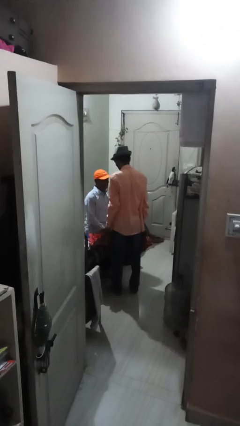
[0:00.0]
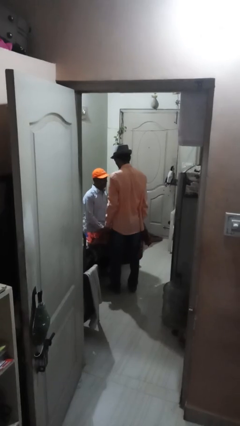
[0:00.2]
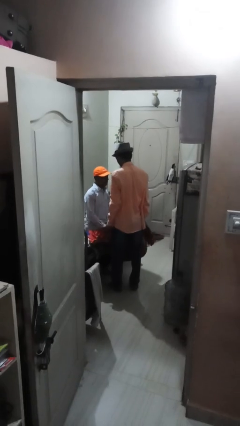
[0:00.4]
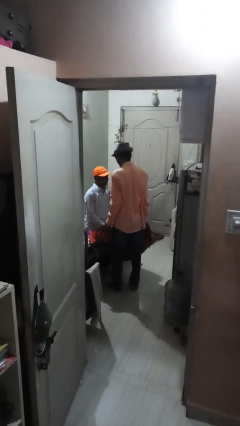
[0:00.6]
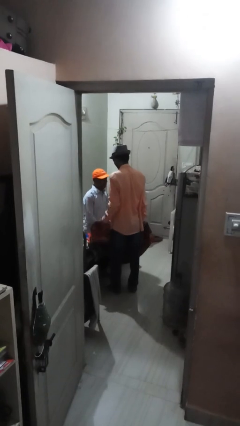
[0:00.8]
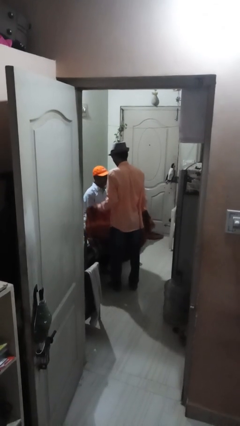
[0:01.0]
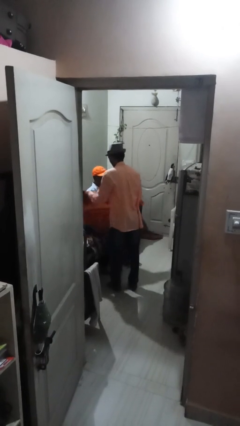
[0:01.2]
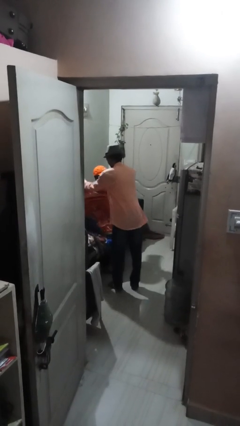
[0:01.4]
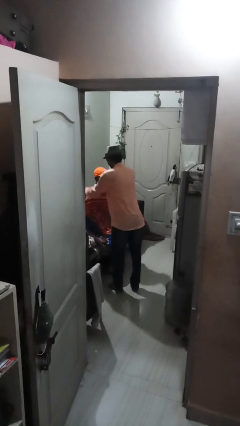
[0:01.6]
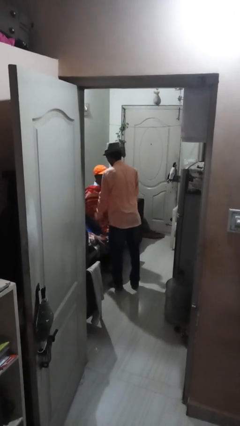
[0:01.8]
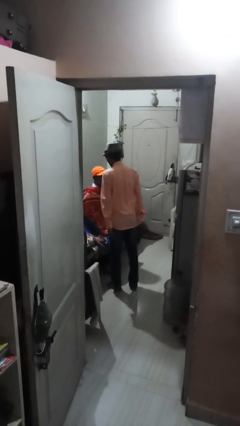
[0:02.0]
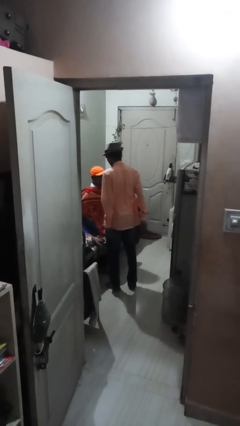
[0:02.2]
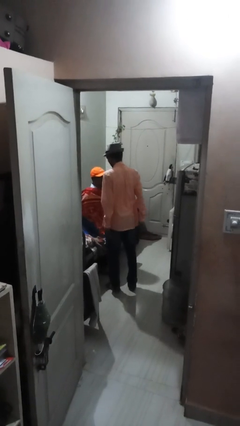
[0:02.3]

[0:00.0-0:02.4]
person uncovers friend with blanket

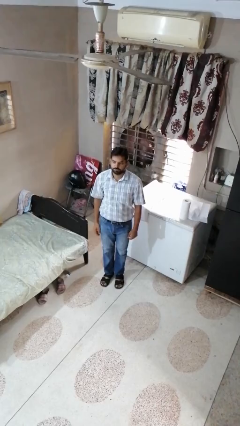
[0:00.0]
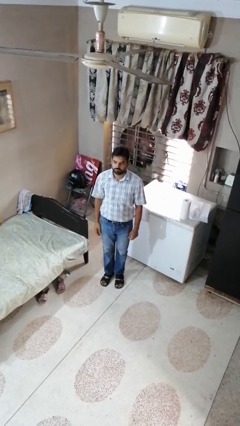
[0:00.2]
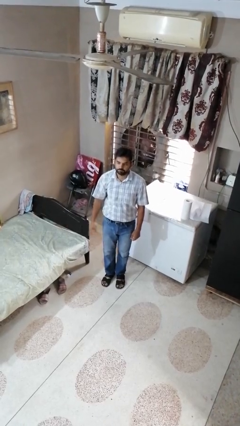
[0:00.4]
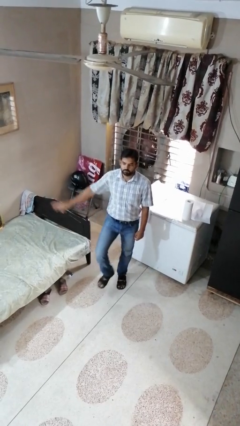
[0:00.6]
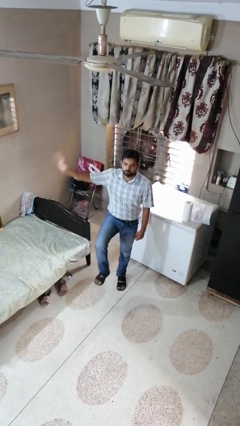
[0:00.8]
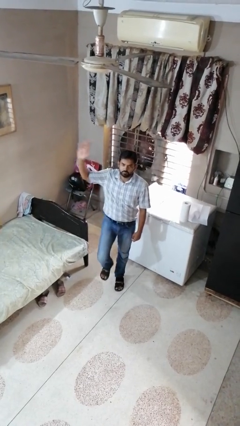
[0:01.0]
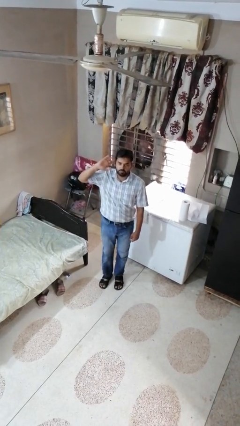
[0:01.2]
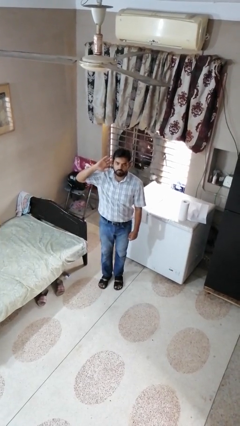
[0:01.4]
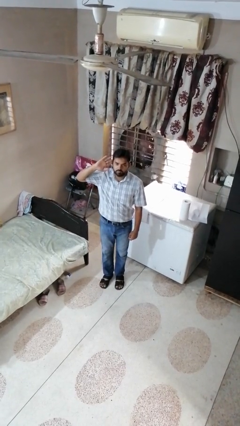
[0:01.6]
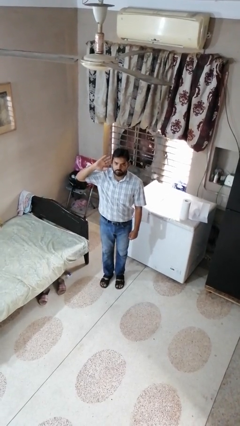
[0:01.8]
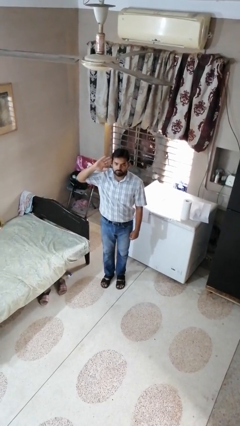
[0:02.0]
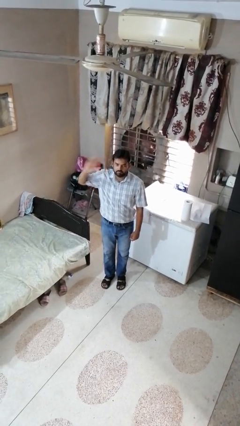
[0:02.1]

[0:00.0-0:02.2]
person salutes

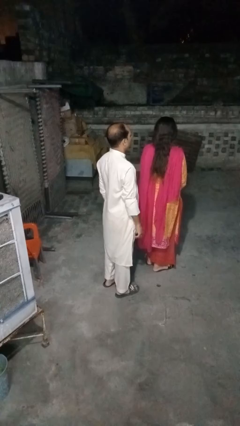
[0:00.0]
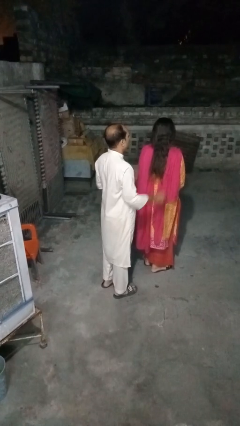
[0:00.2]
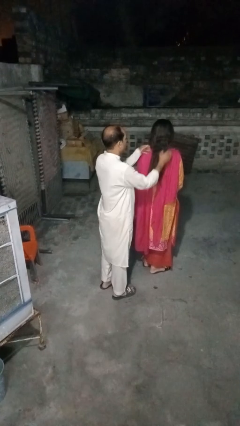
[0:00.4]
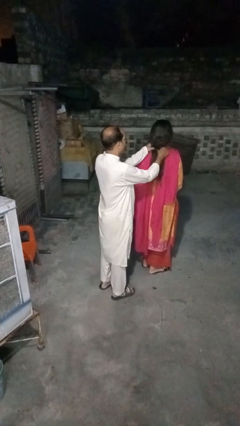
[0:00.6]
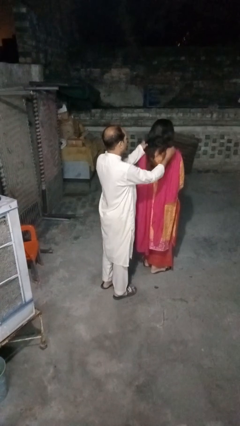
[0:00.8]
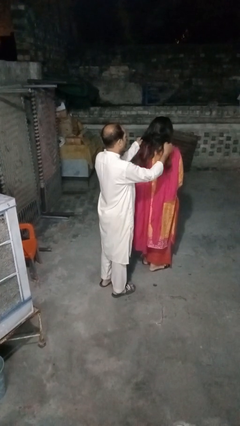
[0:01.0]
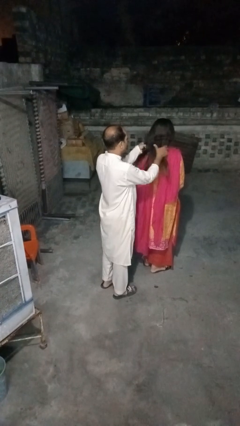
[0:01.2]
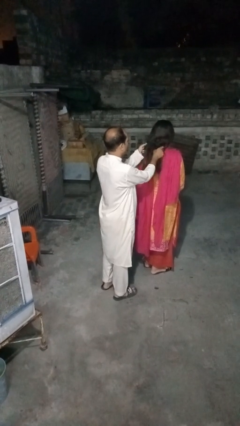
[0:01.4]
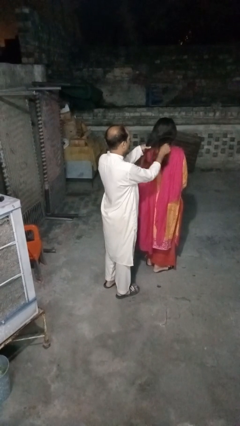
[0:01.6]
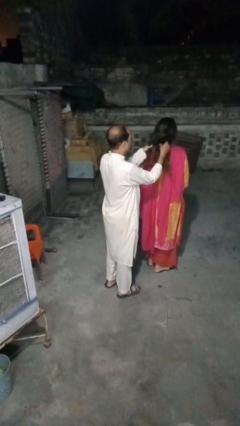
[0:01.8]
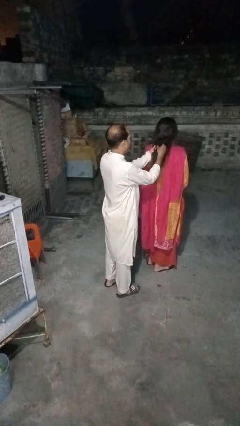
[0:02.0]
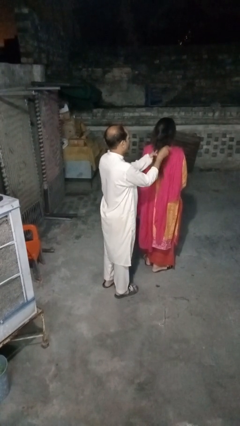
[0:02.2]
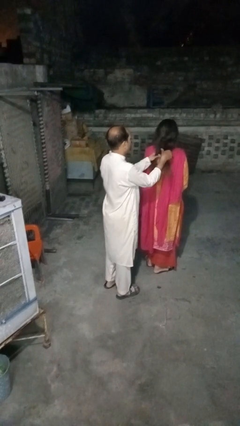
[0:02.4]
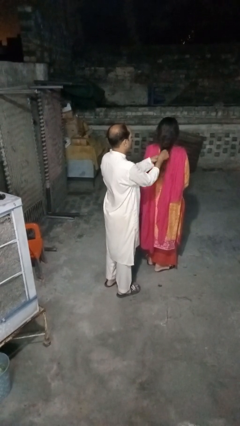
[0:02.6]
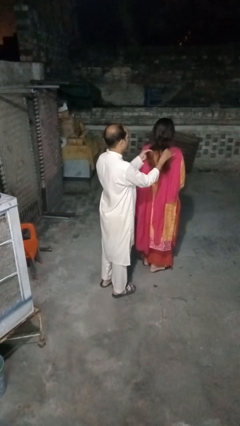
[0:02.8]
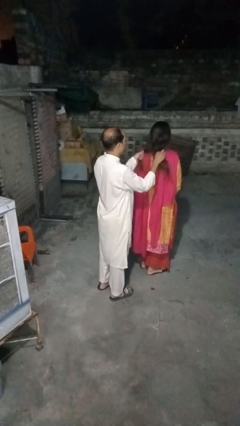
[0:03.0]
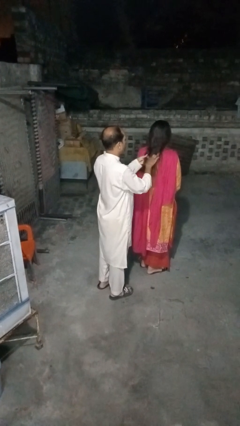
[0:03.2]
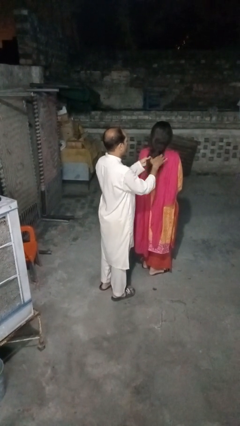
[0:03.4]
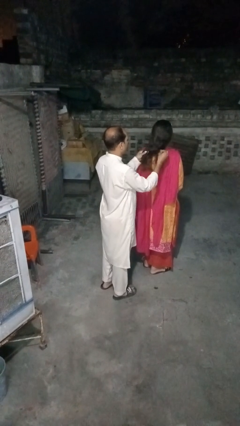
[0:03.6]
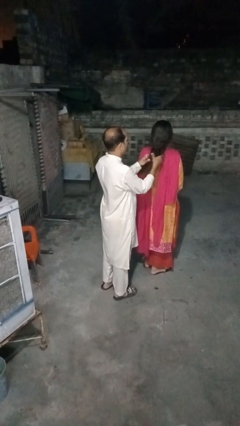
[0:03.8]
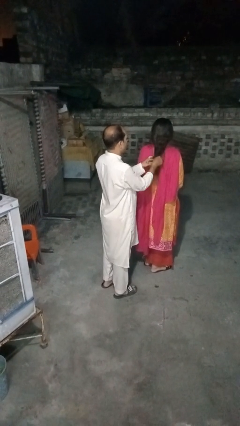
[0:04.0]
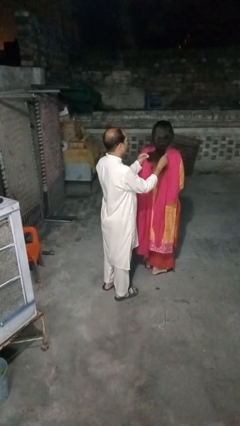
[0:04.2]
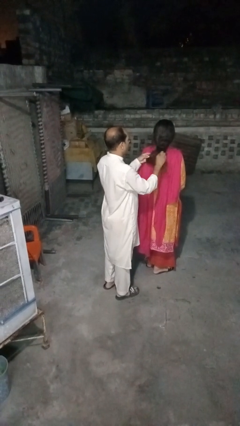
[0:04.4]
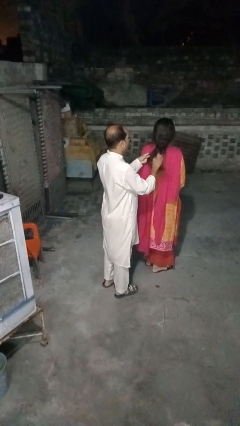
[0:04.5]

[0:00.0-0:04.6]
person braids hair of person

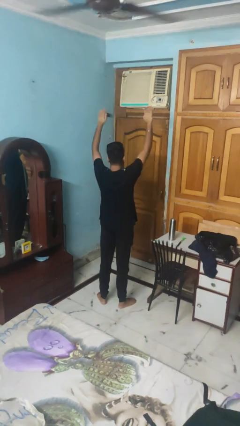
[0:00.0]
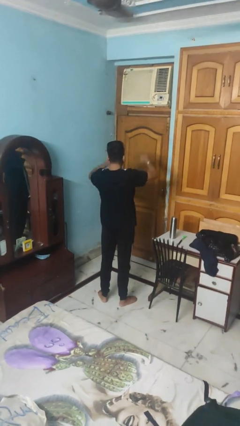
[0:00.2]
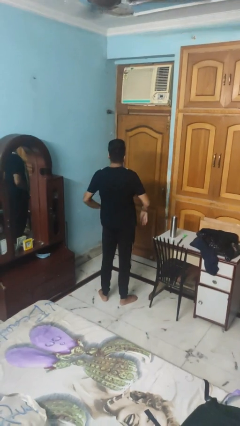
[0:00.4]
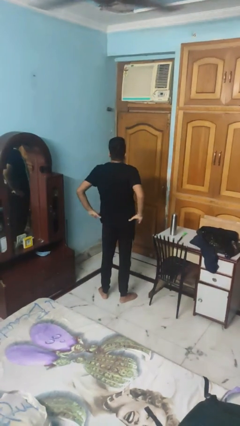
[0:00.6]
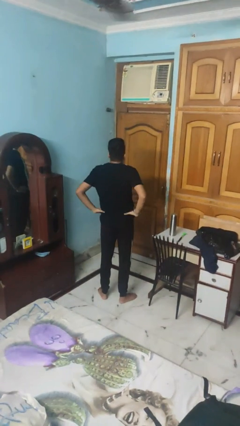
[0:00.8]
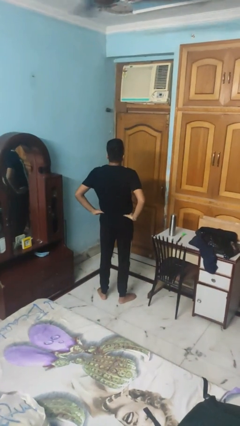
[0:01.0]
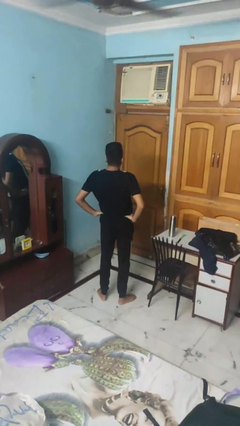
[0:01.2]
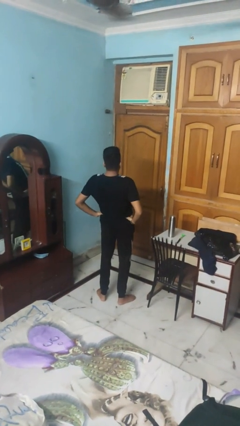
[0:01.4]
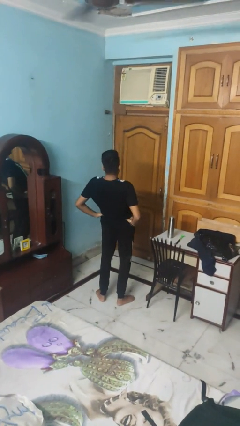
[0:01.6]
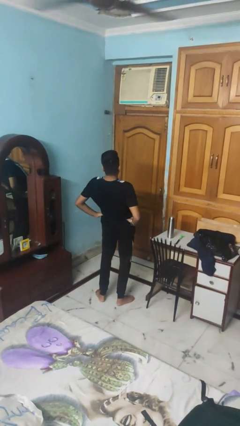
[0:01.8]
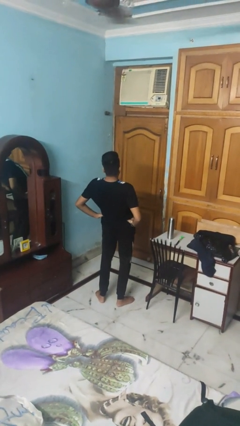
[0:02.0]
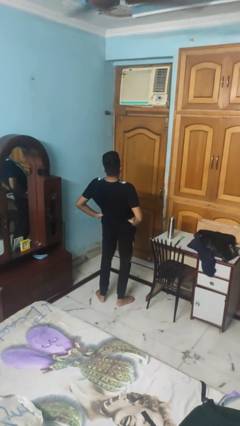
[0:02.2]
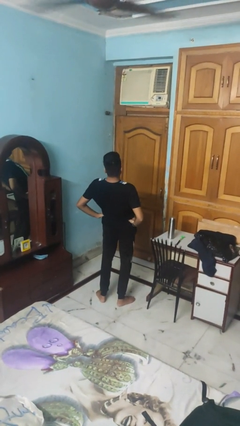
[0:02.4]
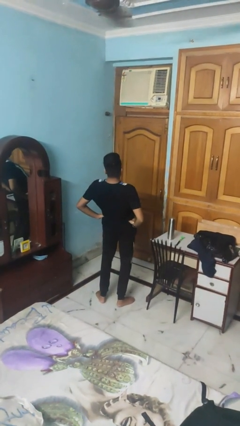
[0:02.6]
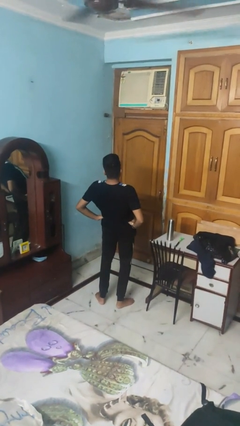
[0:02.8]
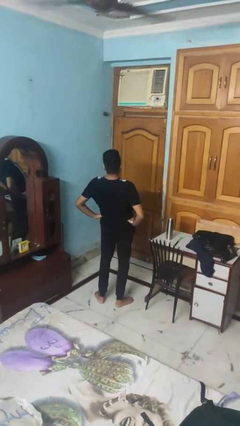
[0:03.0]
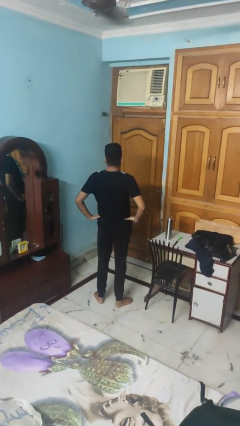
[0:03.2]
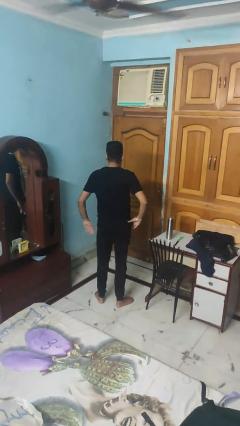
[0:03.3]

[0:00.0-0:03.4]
person stretches back

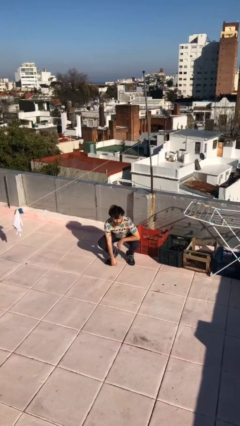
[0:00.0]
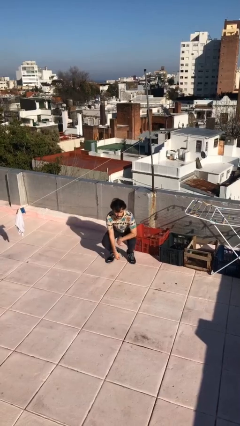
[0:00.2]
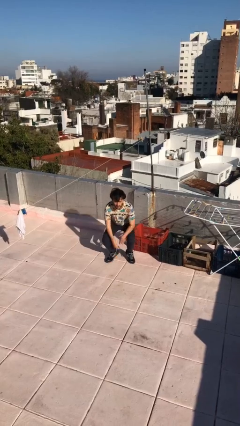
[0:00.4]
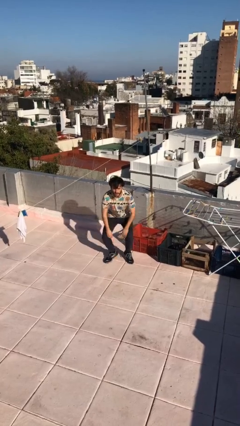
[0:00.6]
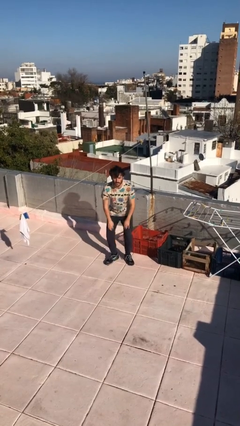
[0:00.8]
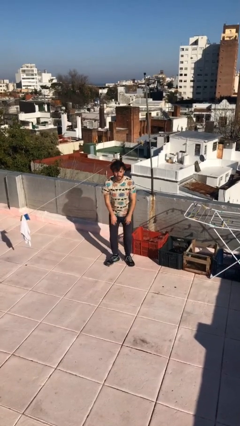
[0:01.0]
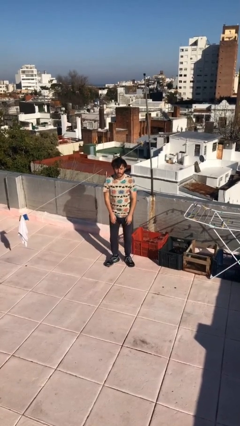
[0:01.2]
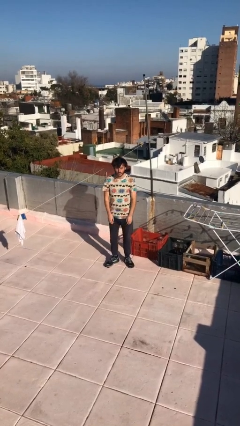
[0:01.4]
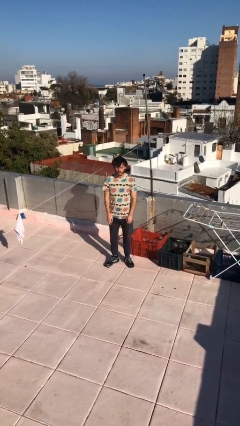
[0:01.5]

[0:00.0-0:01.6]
person stands up

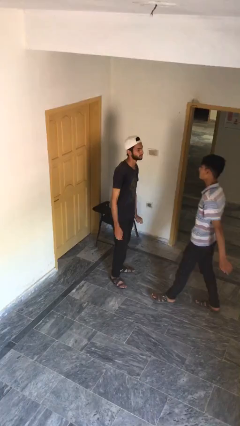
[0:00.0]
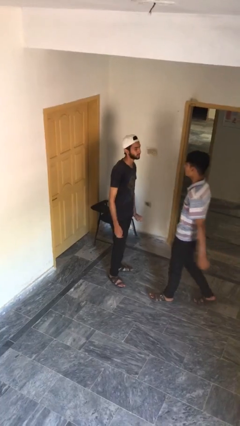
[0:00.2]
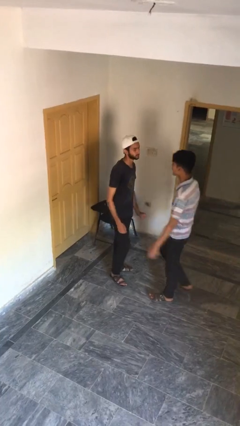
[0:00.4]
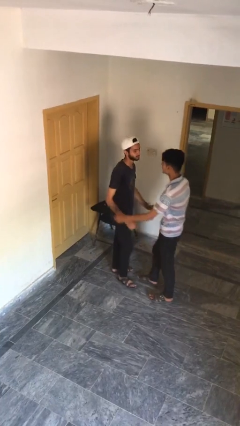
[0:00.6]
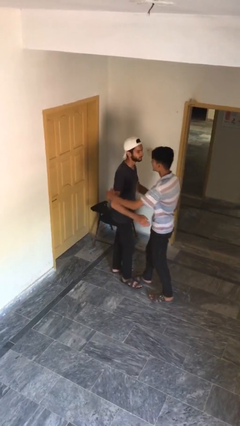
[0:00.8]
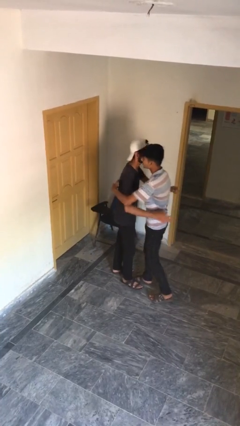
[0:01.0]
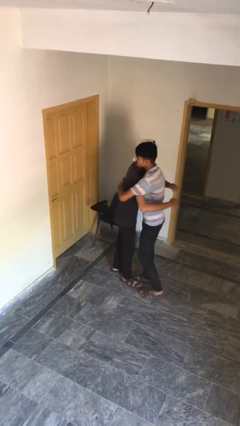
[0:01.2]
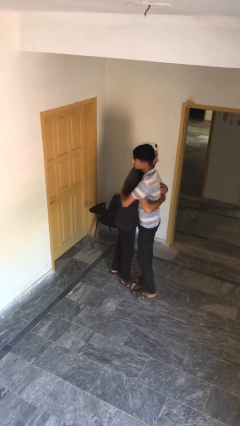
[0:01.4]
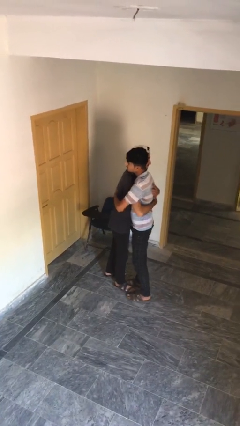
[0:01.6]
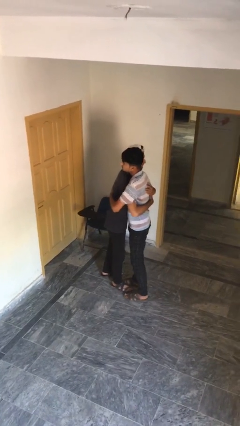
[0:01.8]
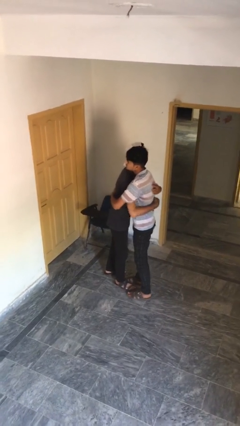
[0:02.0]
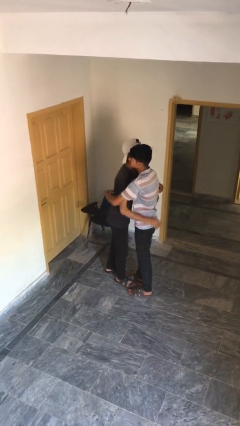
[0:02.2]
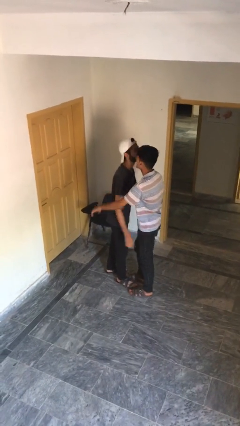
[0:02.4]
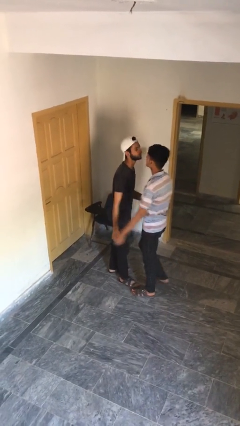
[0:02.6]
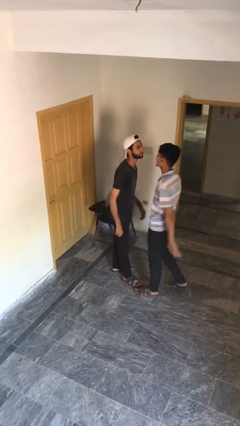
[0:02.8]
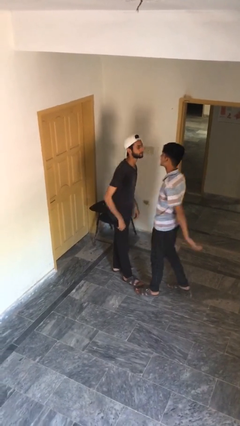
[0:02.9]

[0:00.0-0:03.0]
person embraces person
